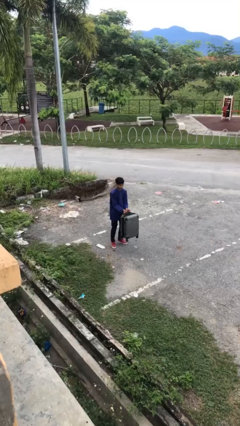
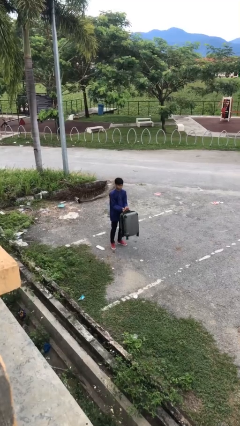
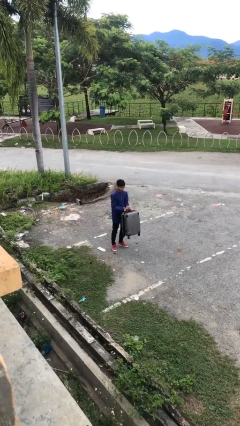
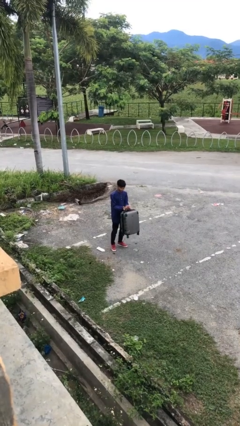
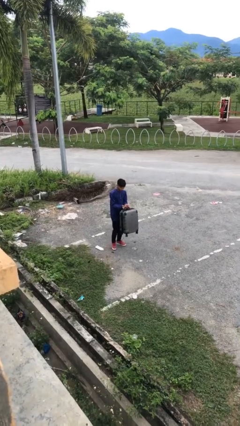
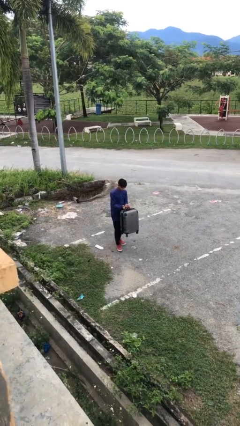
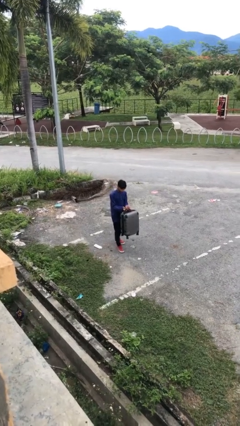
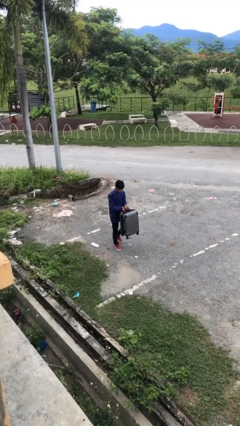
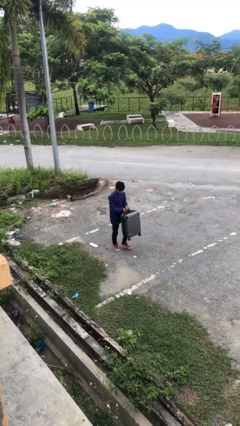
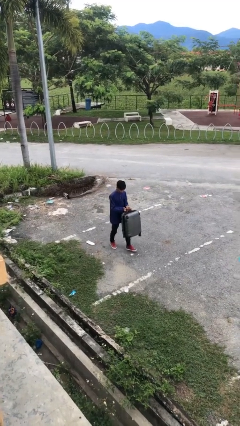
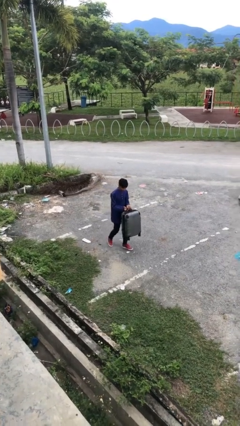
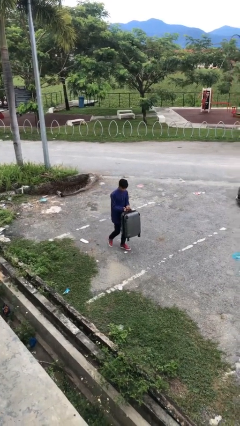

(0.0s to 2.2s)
person carries heavy object

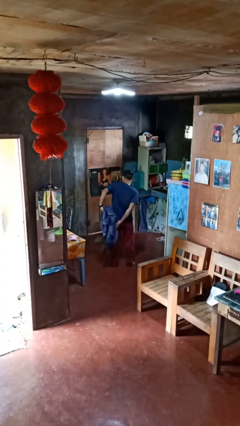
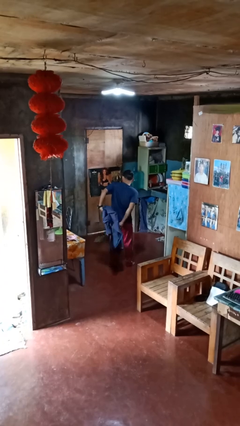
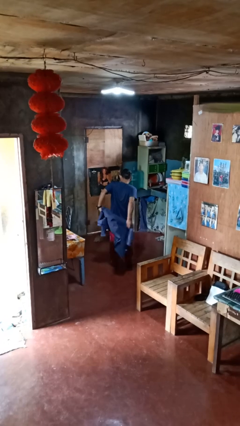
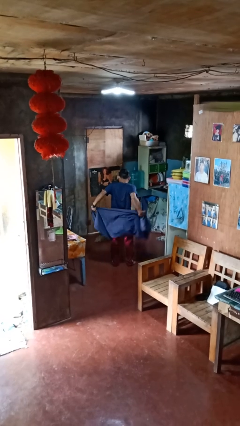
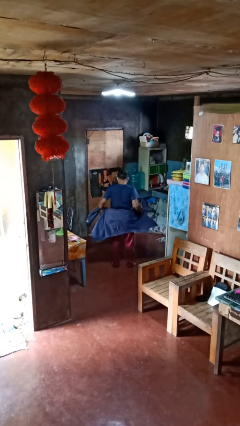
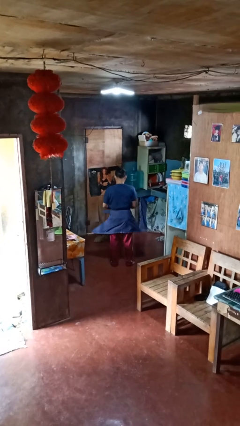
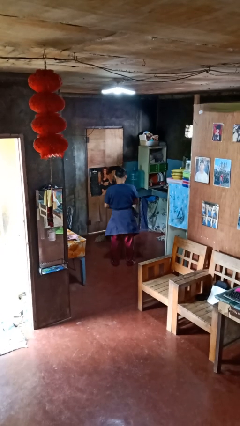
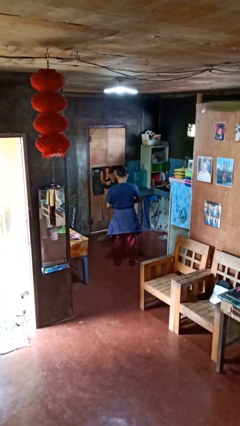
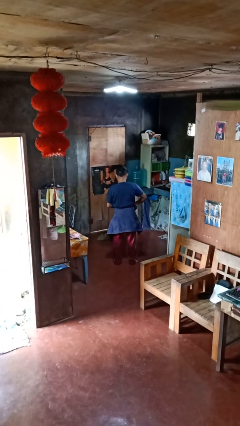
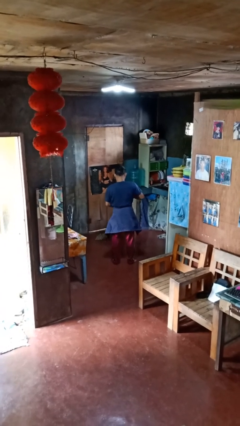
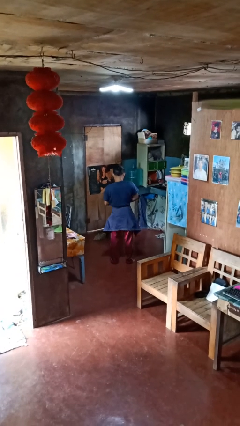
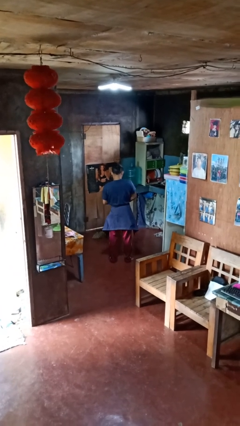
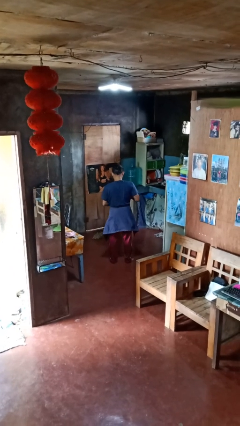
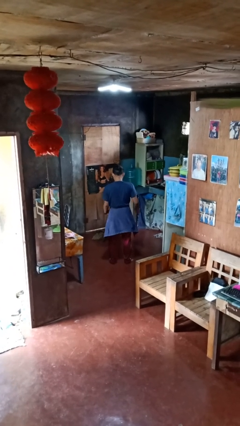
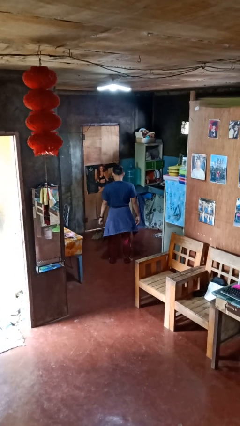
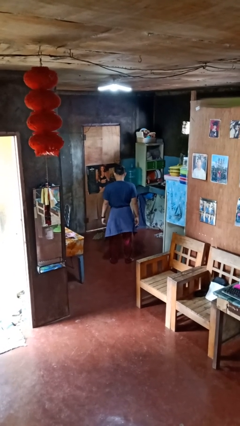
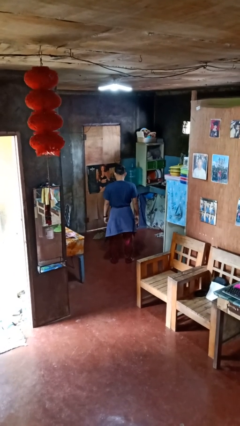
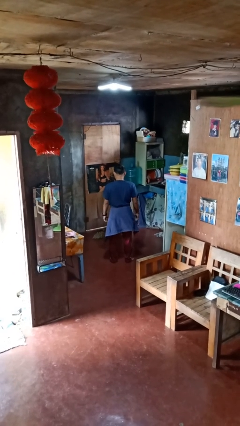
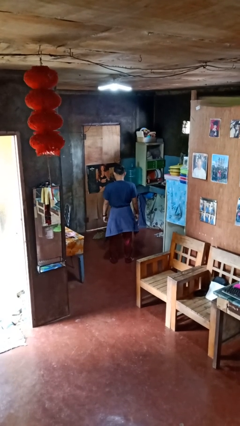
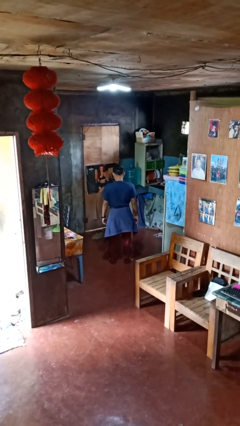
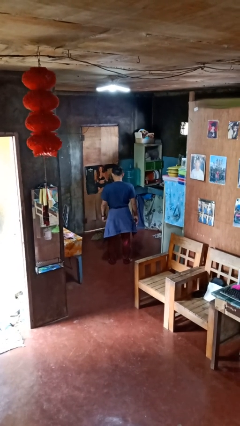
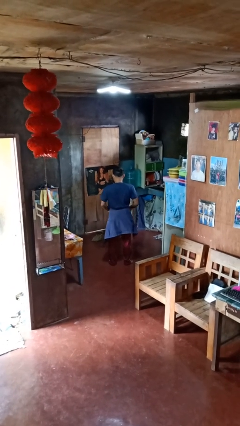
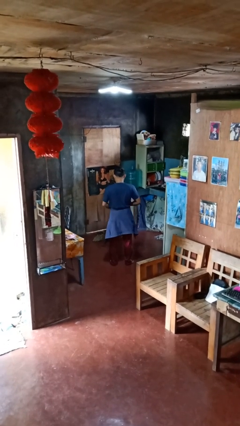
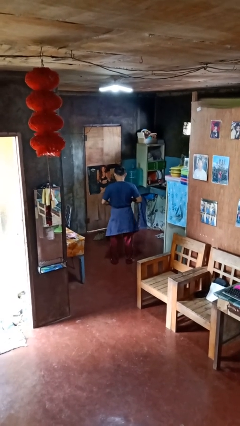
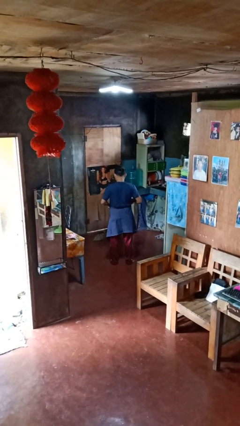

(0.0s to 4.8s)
person ties jacket around waist

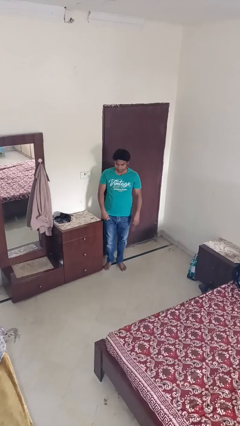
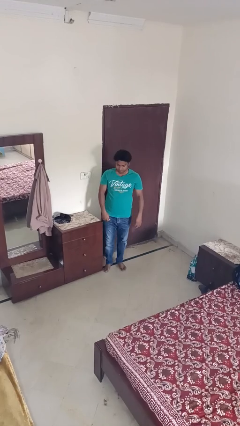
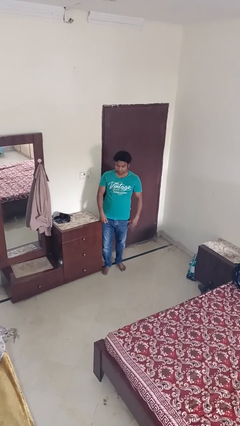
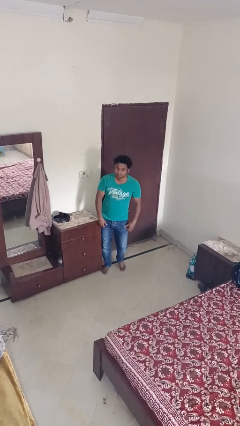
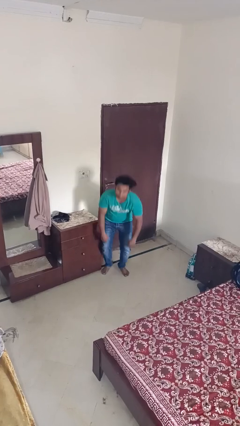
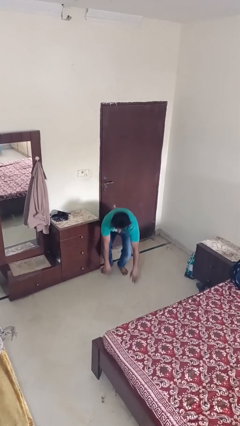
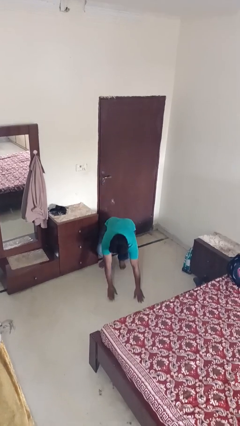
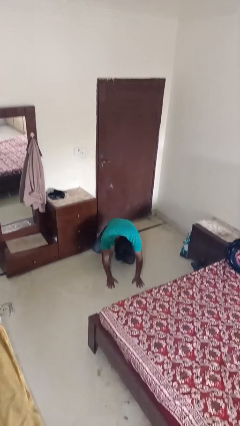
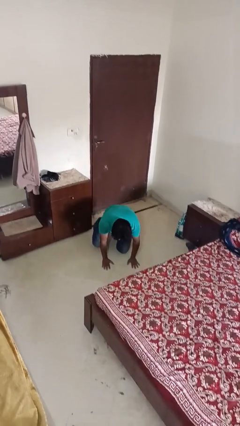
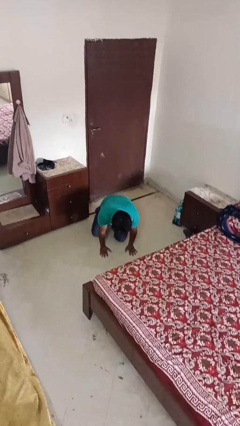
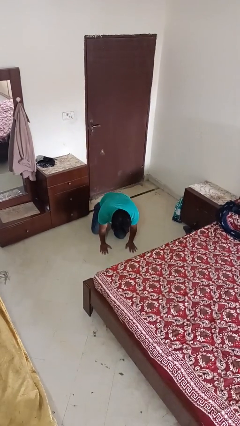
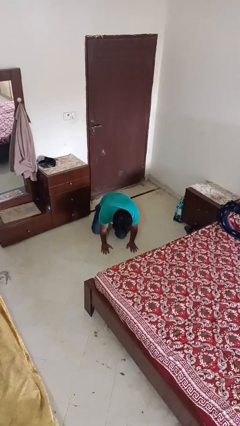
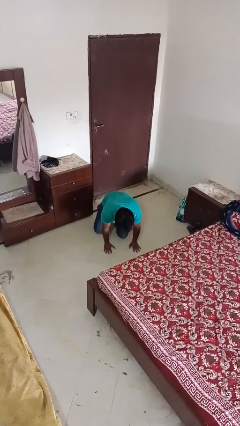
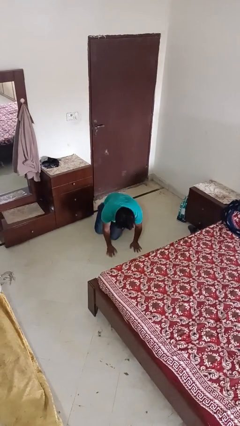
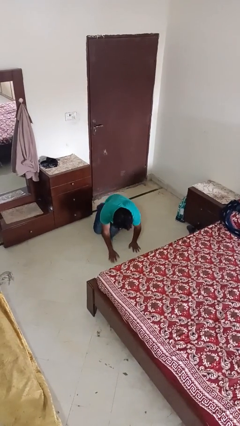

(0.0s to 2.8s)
person trips on object on floor

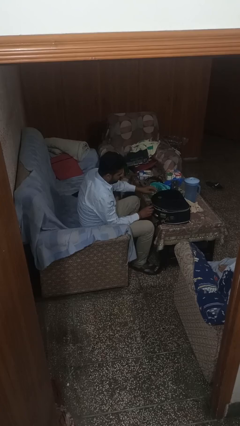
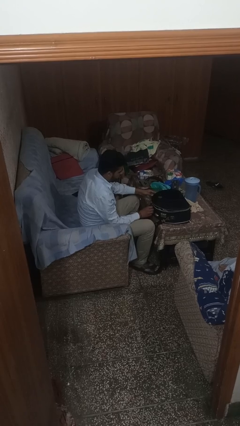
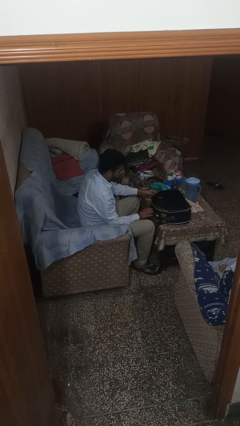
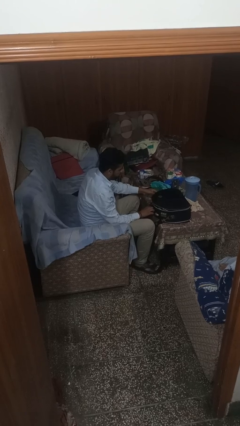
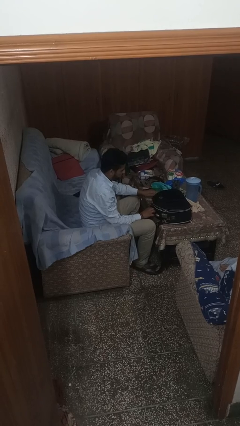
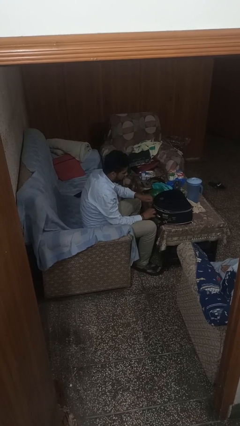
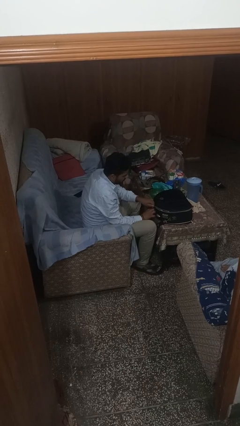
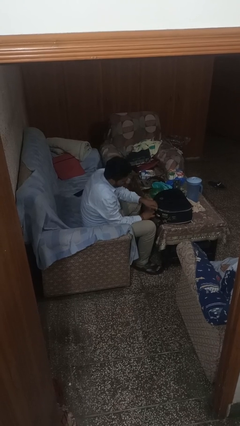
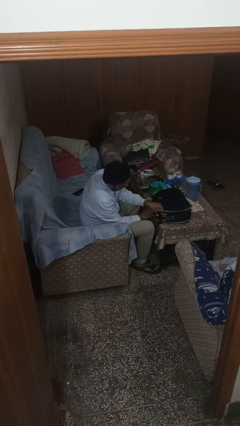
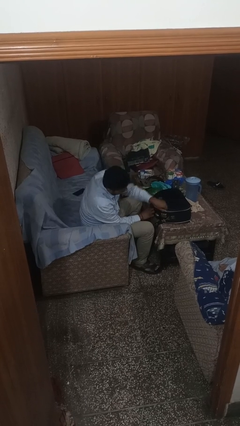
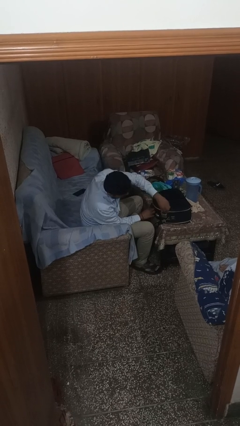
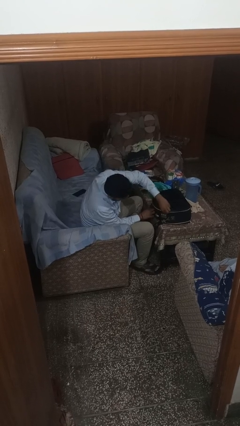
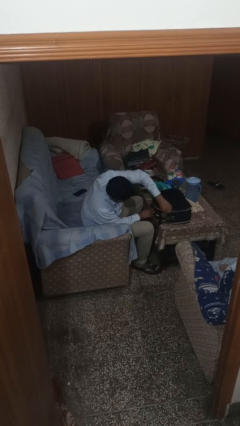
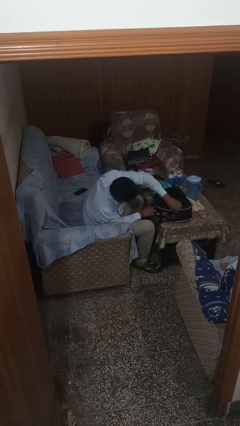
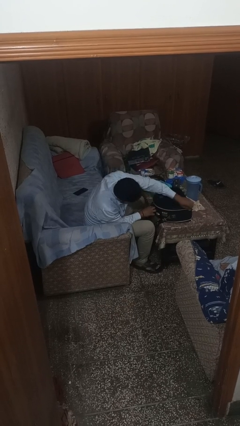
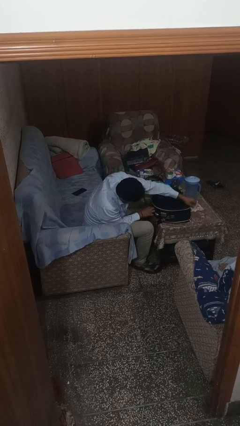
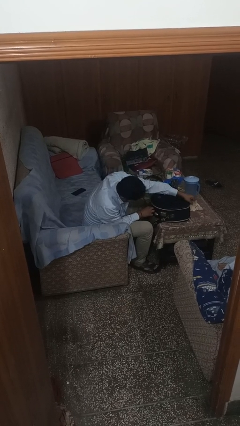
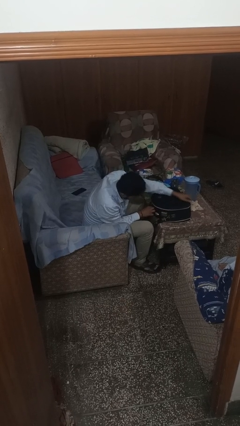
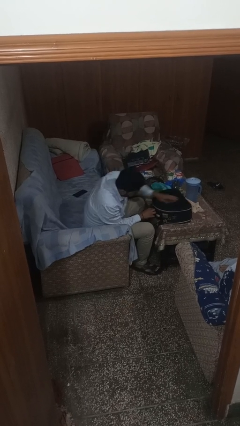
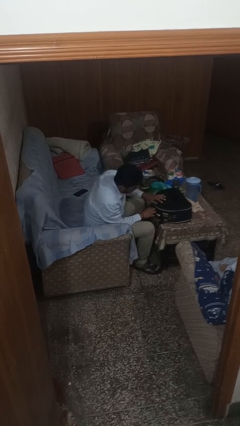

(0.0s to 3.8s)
person closes suitcase

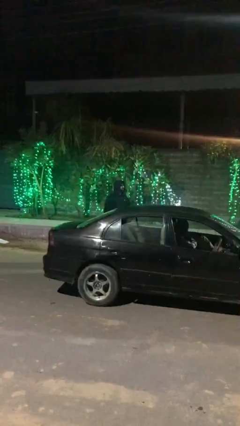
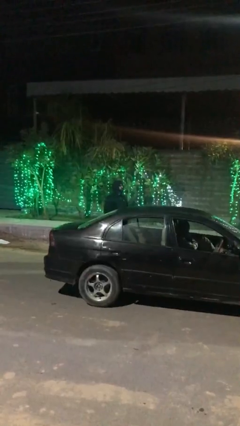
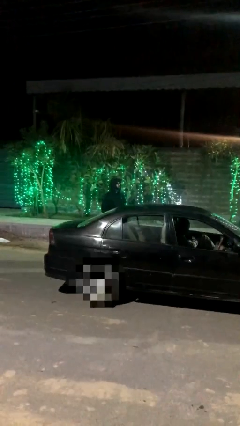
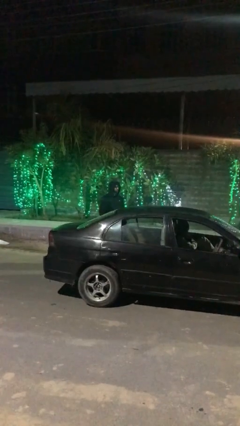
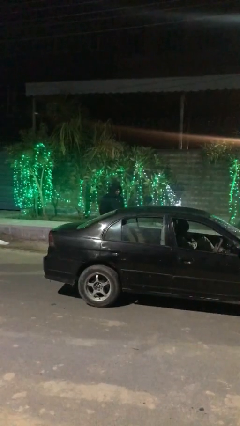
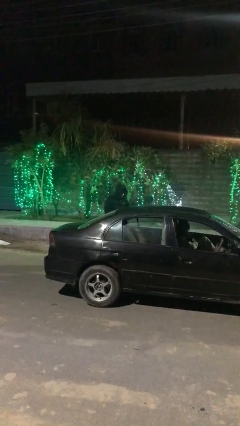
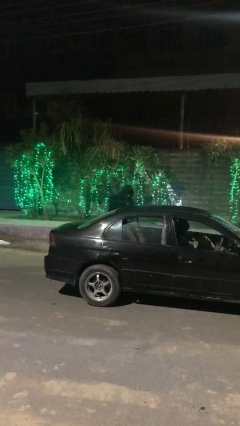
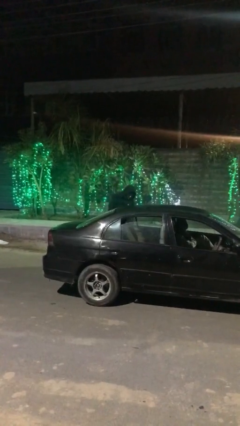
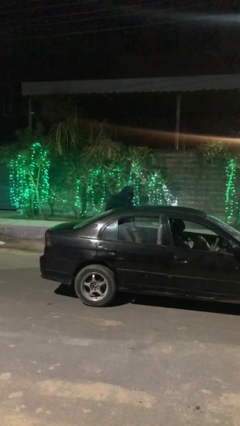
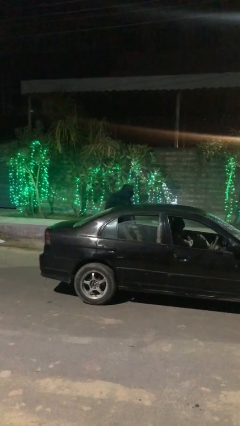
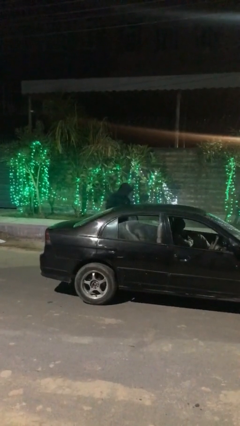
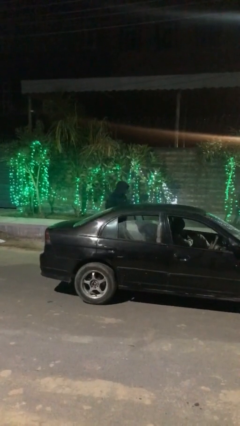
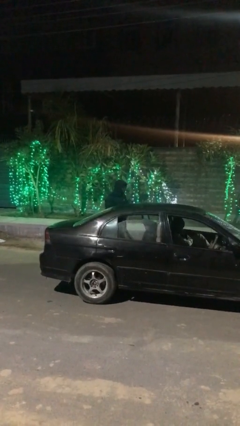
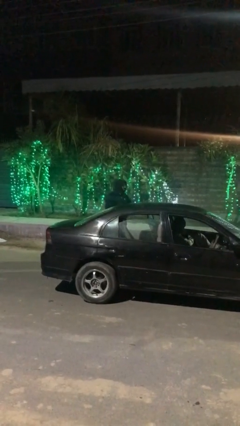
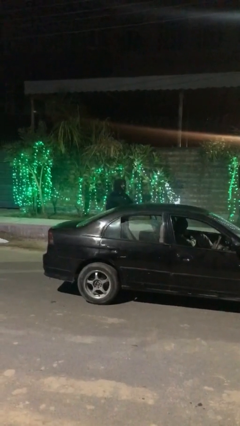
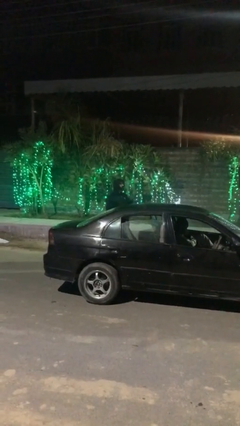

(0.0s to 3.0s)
person opens car door

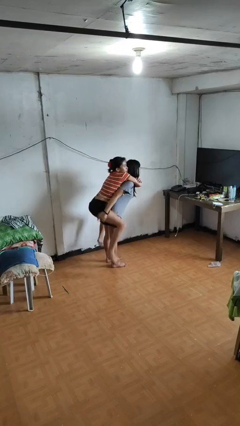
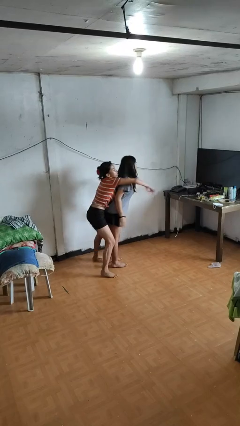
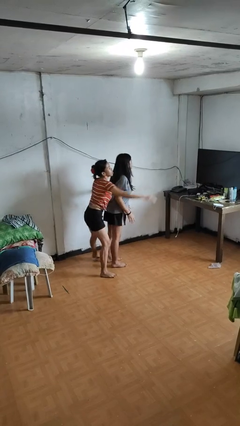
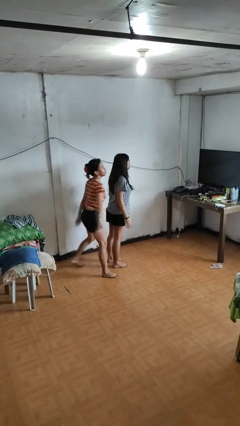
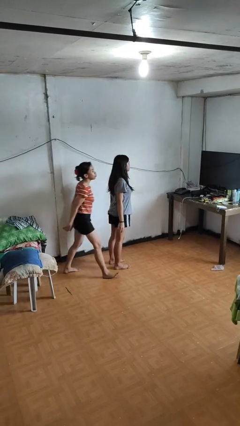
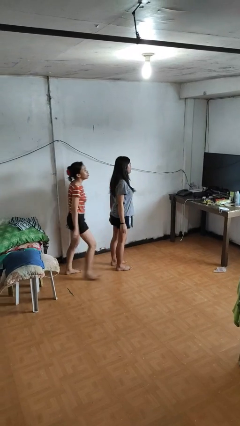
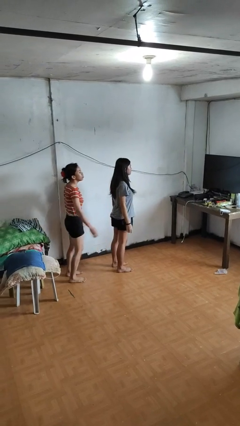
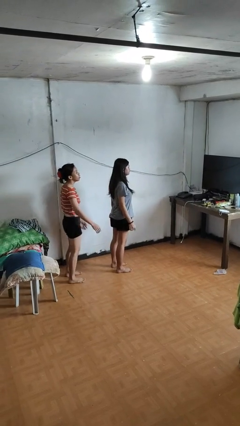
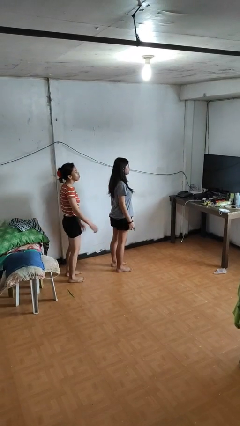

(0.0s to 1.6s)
person puts down person
